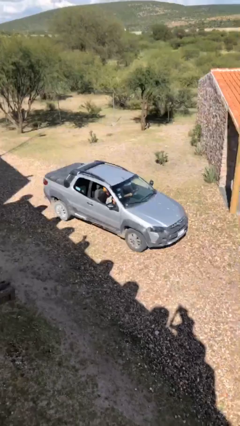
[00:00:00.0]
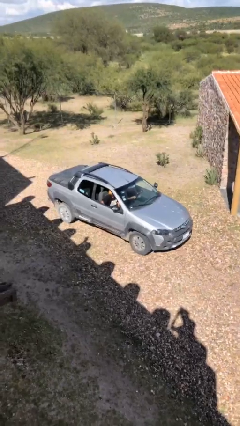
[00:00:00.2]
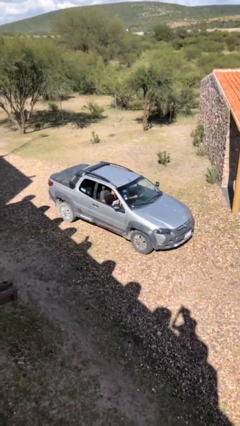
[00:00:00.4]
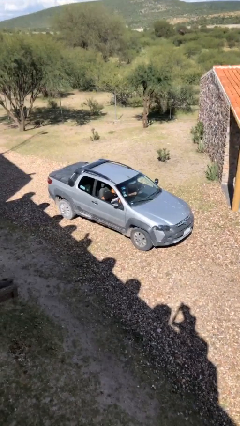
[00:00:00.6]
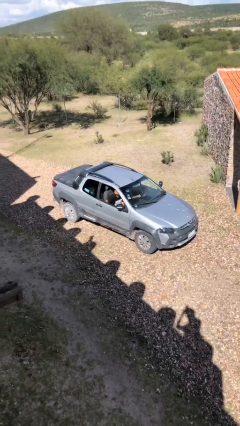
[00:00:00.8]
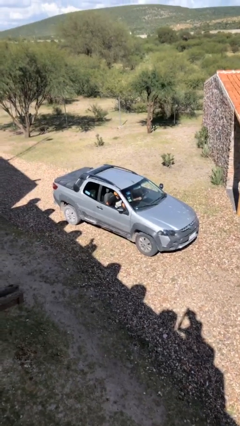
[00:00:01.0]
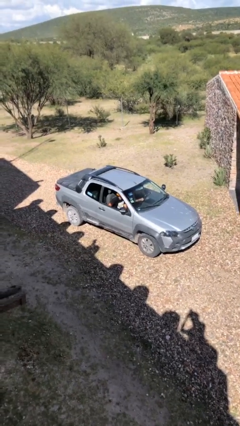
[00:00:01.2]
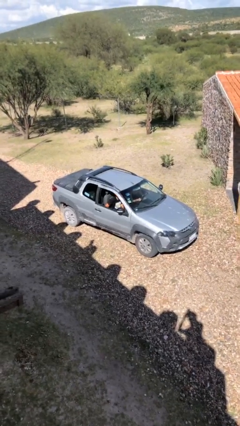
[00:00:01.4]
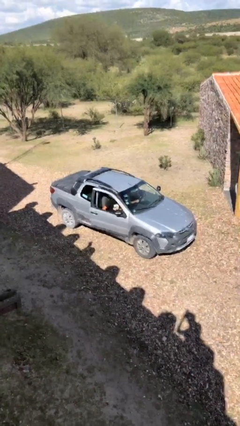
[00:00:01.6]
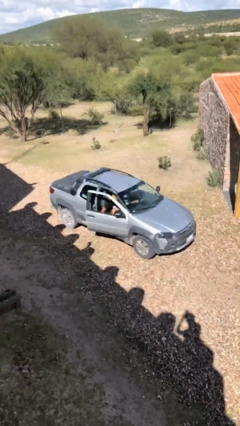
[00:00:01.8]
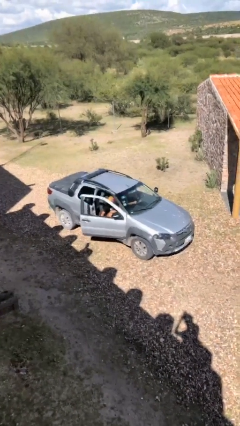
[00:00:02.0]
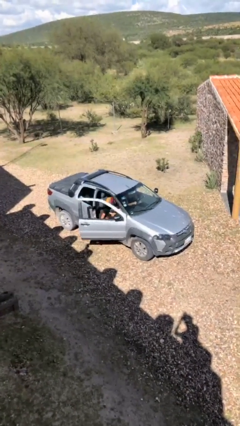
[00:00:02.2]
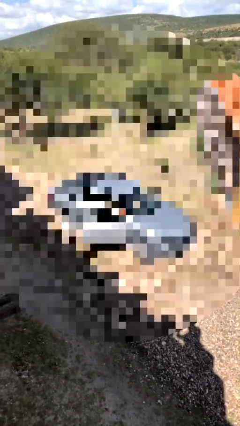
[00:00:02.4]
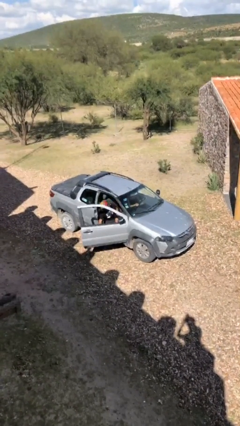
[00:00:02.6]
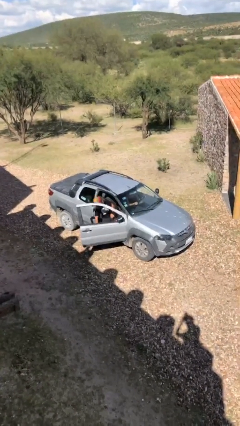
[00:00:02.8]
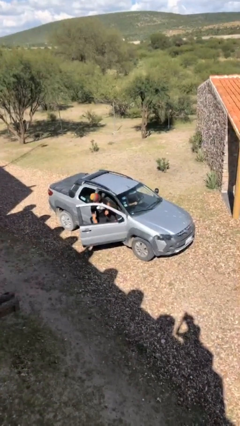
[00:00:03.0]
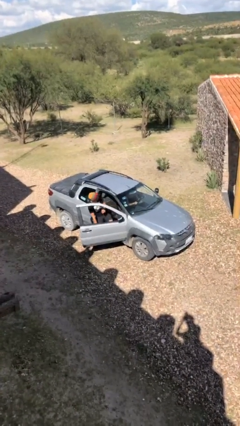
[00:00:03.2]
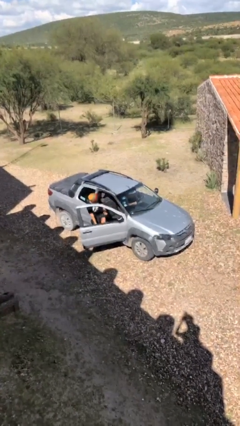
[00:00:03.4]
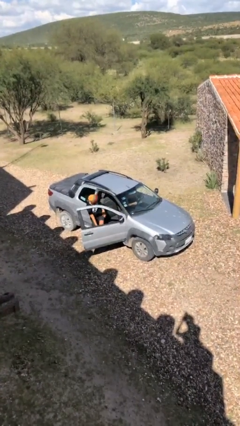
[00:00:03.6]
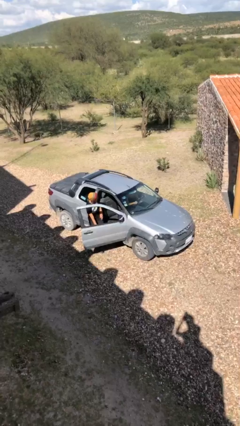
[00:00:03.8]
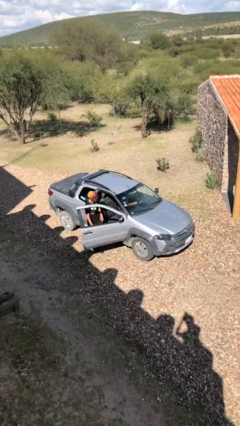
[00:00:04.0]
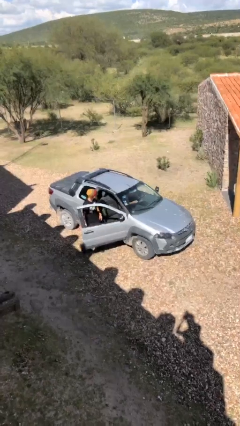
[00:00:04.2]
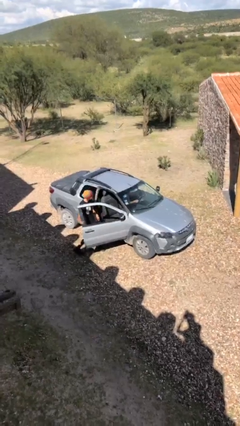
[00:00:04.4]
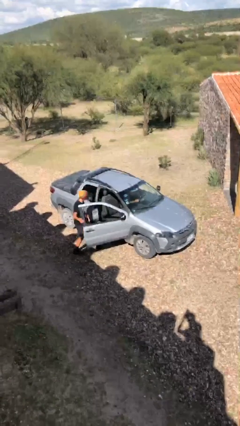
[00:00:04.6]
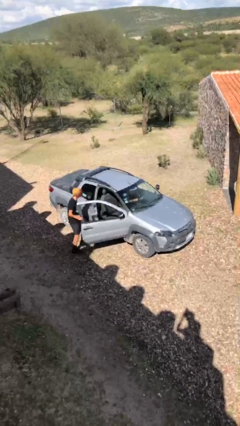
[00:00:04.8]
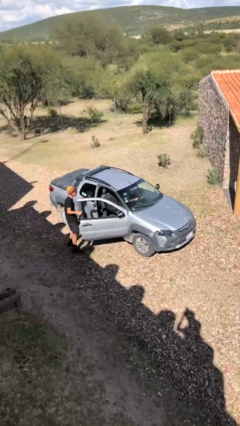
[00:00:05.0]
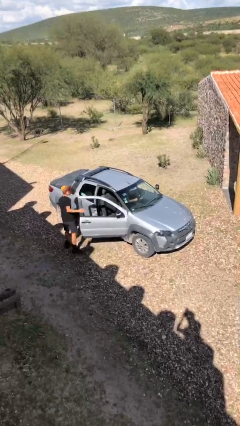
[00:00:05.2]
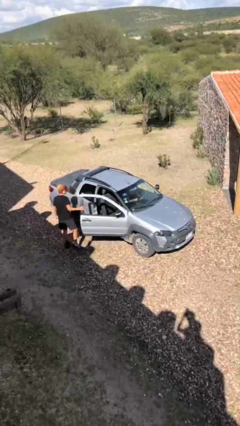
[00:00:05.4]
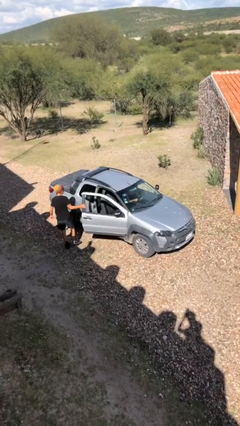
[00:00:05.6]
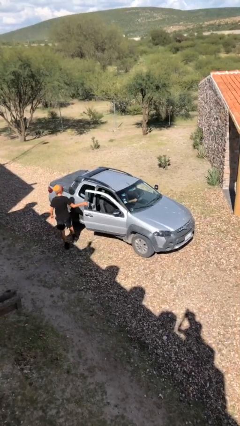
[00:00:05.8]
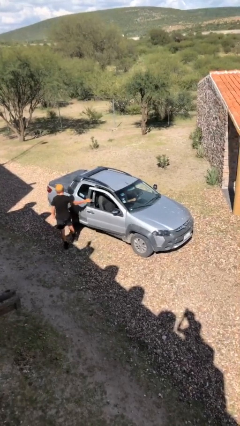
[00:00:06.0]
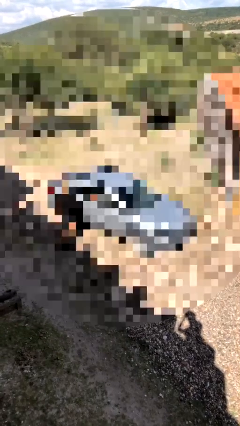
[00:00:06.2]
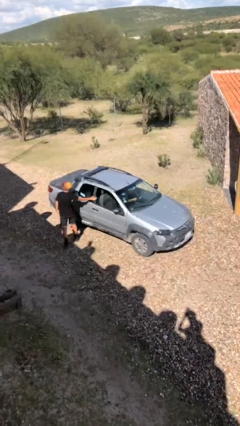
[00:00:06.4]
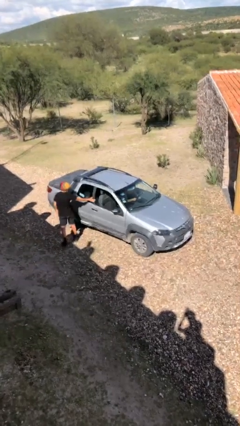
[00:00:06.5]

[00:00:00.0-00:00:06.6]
car drops off person

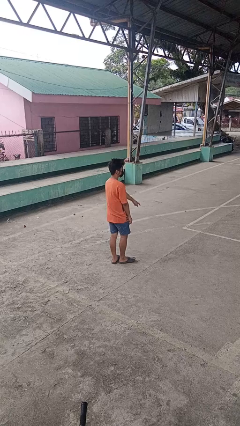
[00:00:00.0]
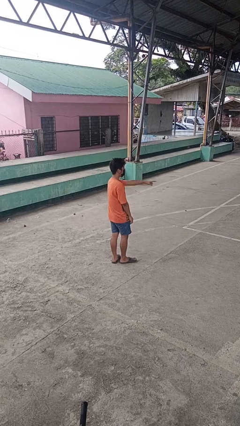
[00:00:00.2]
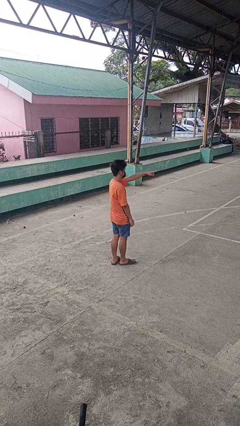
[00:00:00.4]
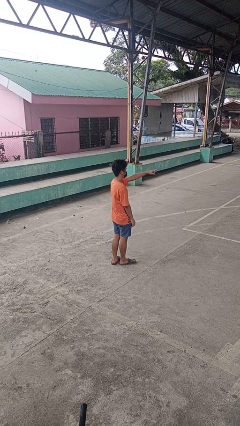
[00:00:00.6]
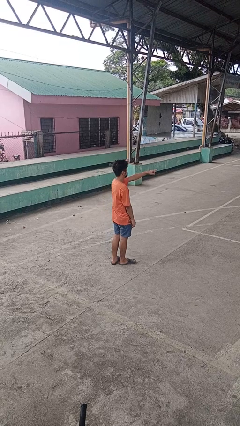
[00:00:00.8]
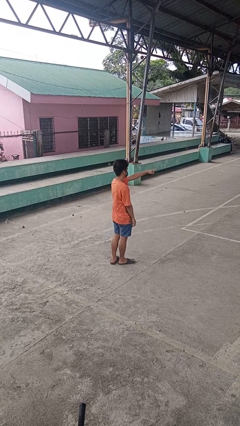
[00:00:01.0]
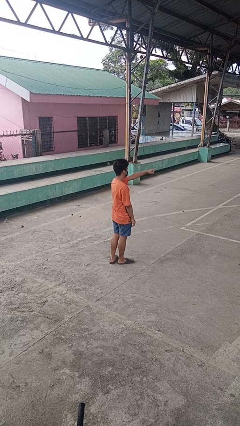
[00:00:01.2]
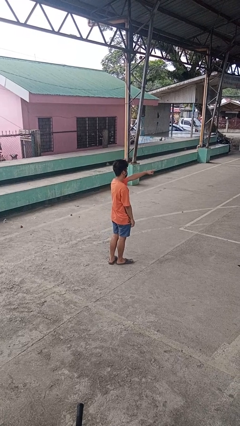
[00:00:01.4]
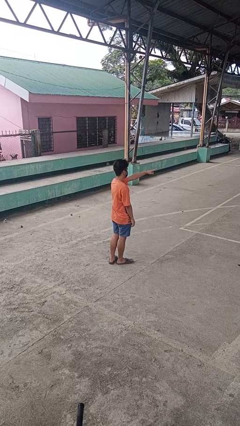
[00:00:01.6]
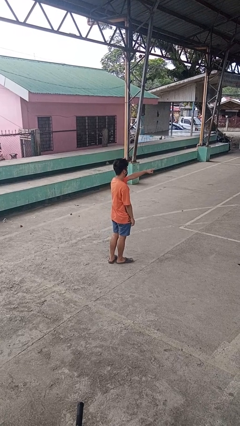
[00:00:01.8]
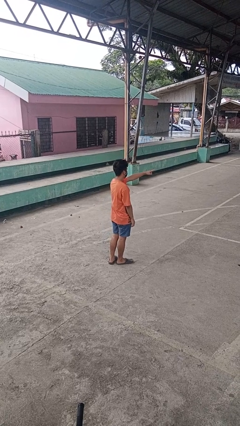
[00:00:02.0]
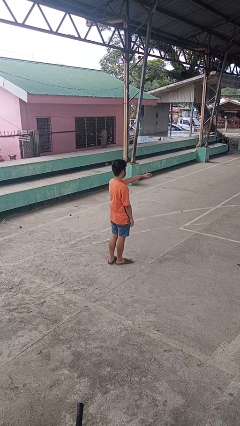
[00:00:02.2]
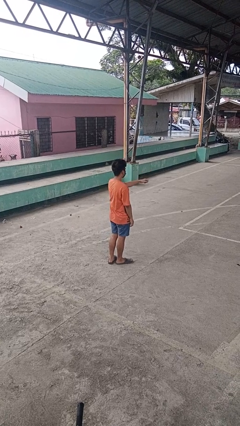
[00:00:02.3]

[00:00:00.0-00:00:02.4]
person points at person

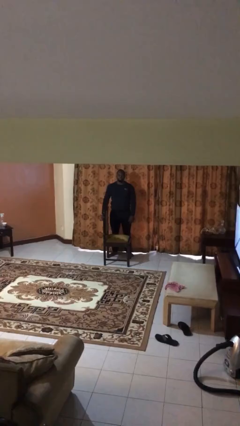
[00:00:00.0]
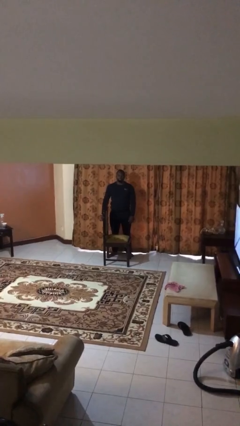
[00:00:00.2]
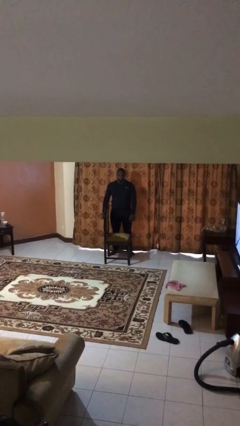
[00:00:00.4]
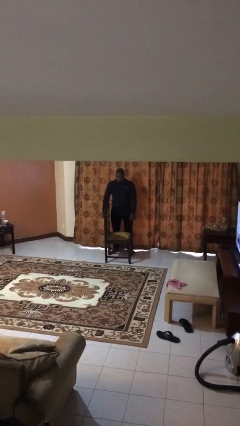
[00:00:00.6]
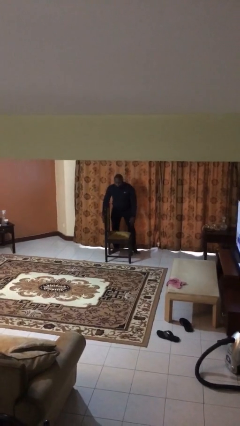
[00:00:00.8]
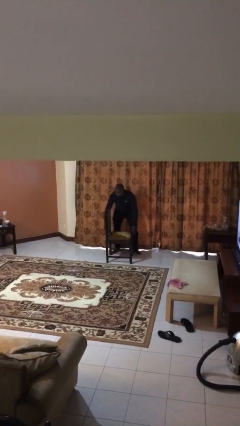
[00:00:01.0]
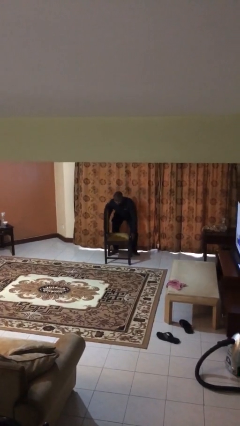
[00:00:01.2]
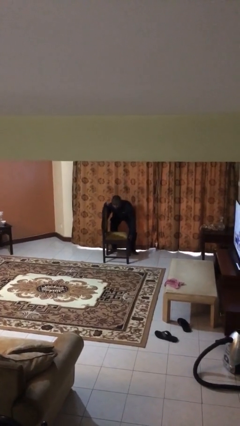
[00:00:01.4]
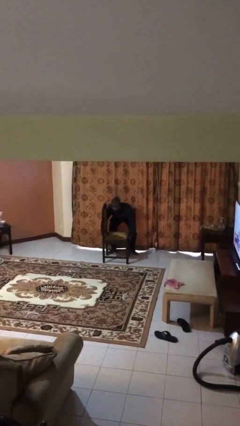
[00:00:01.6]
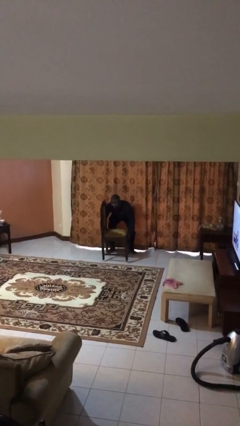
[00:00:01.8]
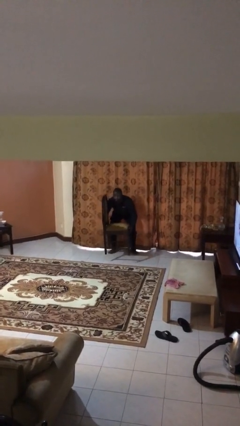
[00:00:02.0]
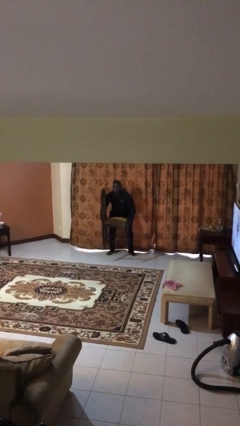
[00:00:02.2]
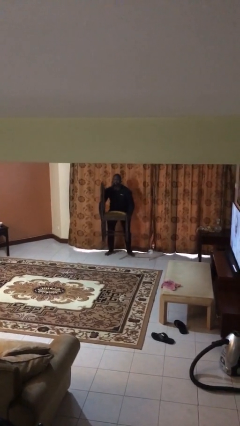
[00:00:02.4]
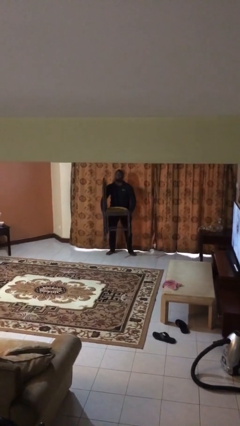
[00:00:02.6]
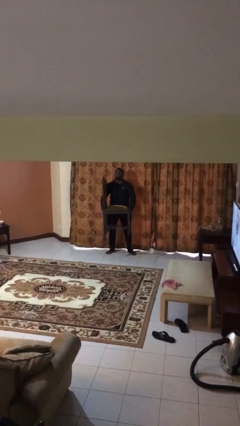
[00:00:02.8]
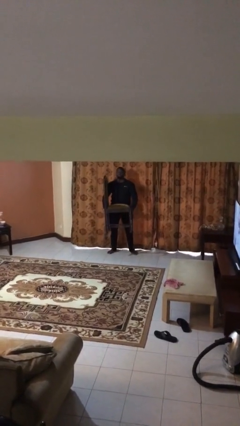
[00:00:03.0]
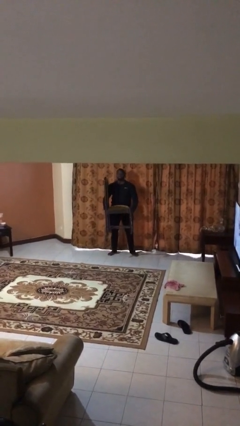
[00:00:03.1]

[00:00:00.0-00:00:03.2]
person picks up object from floor

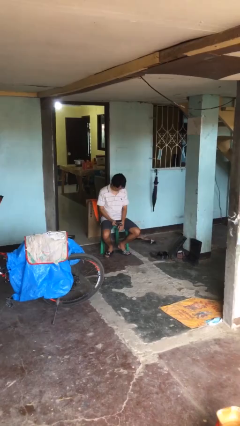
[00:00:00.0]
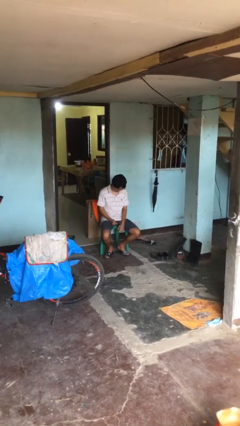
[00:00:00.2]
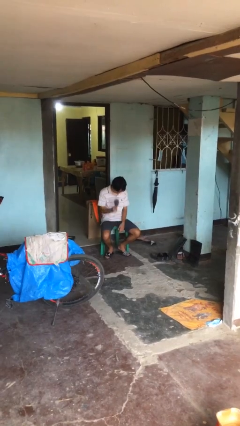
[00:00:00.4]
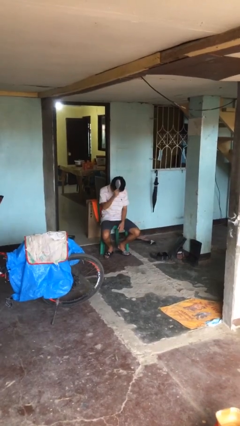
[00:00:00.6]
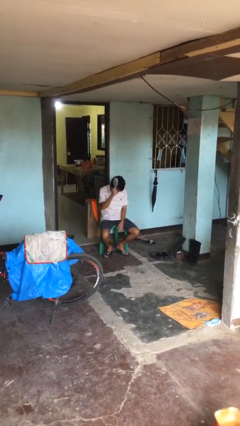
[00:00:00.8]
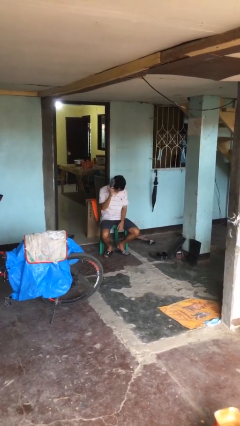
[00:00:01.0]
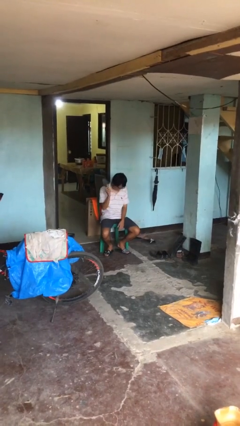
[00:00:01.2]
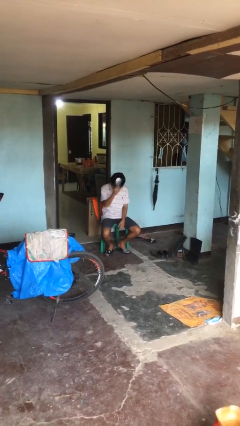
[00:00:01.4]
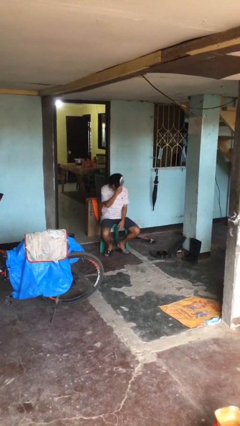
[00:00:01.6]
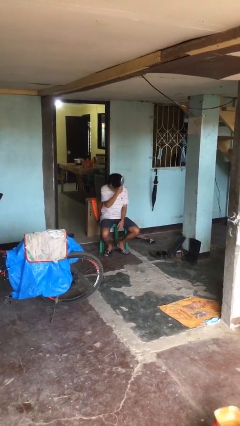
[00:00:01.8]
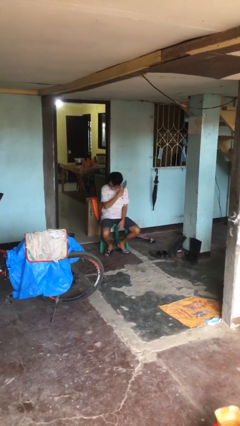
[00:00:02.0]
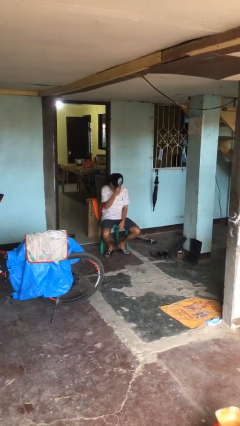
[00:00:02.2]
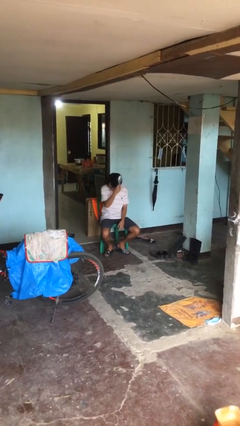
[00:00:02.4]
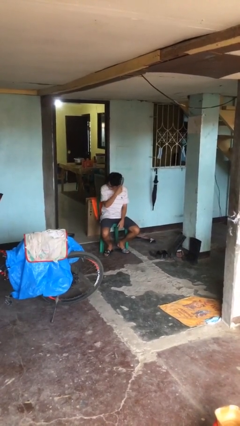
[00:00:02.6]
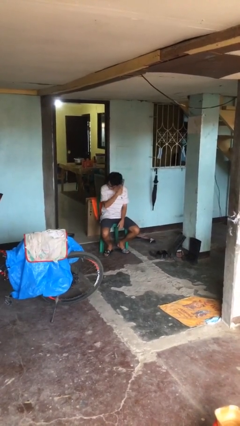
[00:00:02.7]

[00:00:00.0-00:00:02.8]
person brushes hair

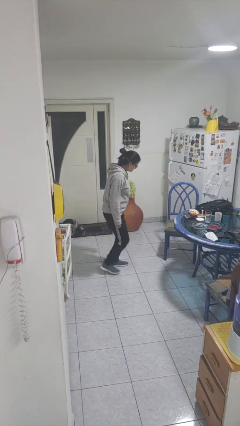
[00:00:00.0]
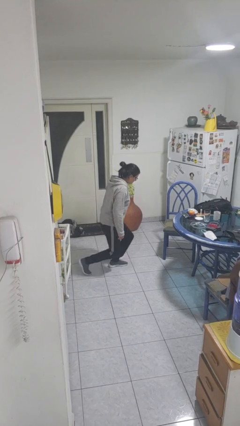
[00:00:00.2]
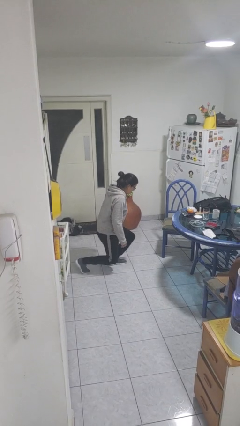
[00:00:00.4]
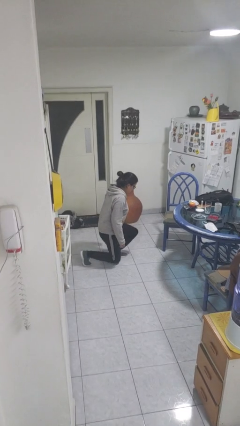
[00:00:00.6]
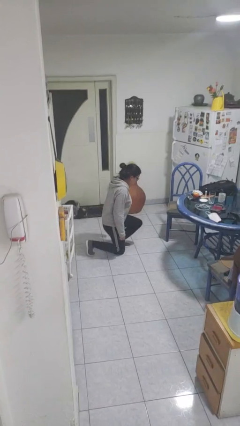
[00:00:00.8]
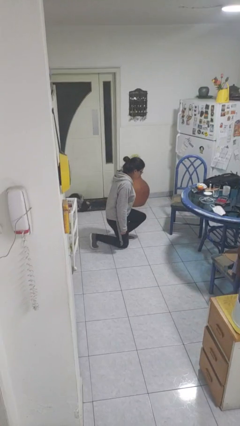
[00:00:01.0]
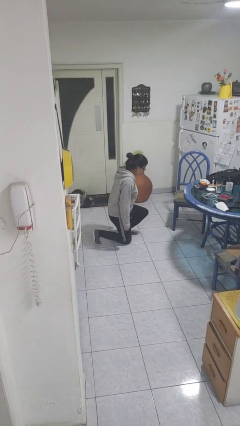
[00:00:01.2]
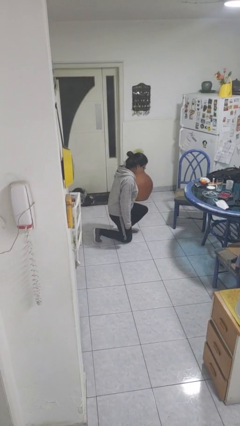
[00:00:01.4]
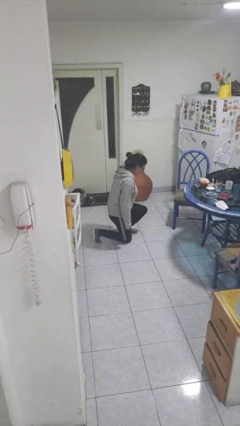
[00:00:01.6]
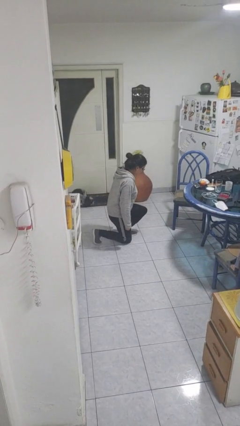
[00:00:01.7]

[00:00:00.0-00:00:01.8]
person kneels

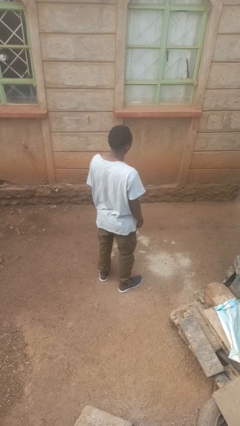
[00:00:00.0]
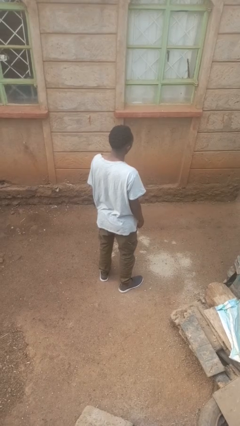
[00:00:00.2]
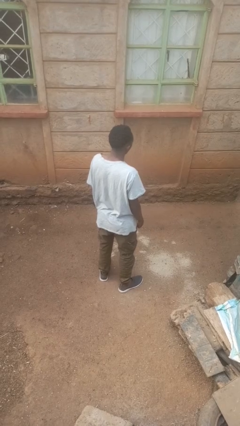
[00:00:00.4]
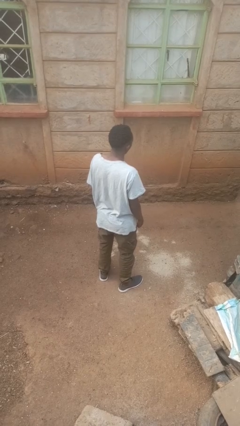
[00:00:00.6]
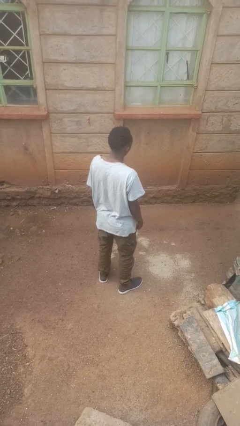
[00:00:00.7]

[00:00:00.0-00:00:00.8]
person licks fingers
